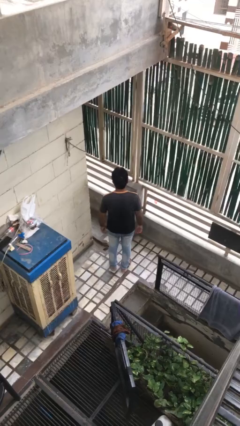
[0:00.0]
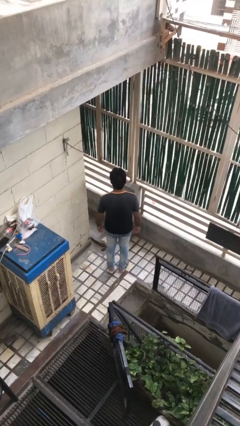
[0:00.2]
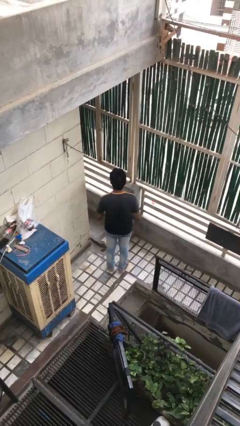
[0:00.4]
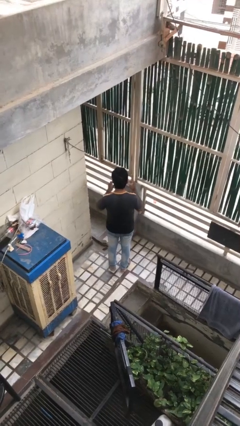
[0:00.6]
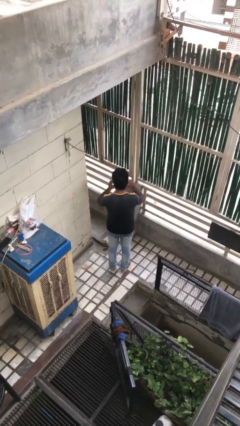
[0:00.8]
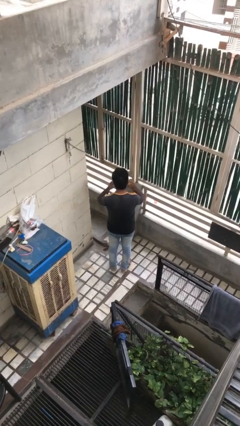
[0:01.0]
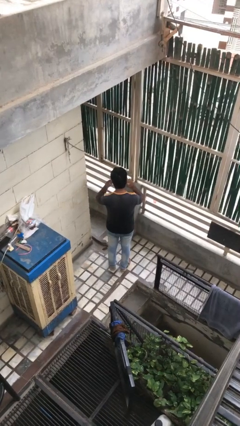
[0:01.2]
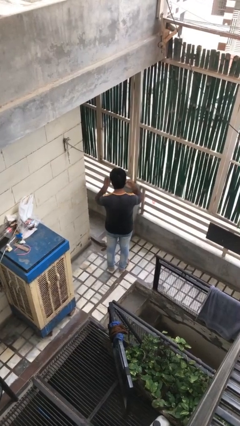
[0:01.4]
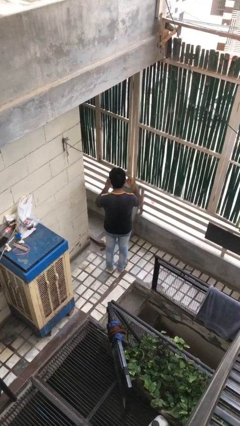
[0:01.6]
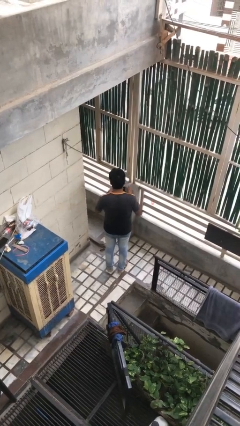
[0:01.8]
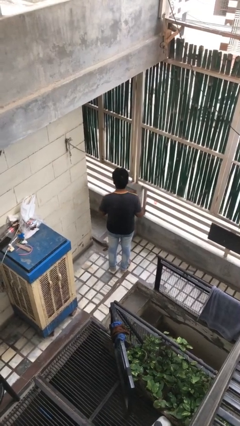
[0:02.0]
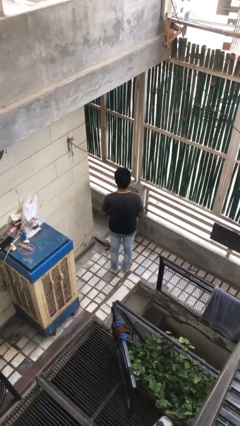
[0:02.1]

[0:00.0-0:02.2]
person takes off facemask

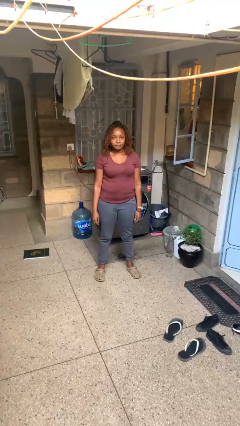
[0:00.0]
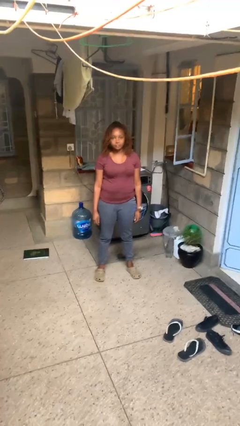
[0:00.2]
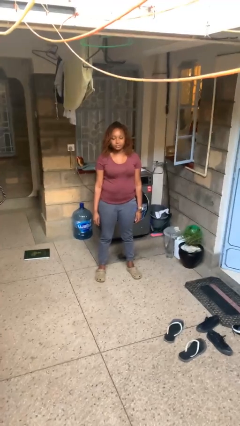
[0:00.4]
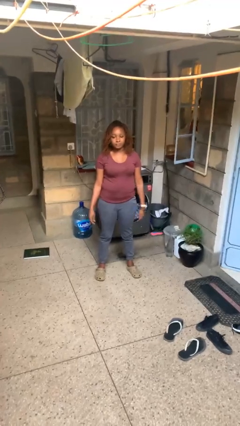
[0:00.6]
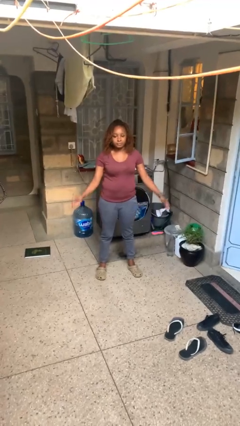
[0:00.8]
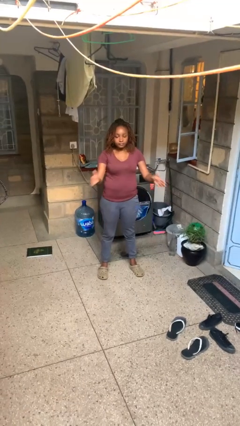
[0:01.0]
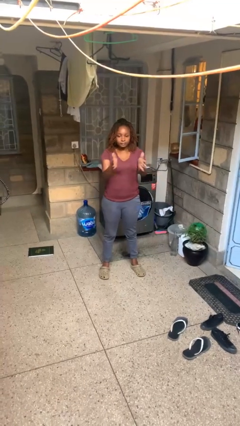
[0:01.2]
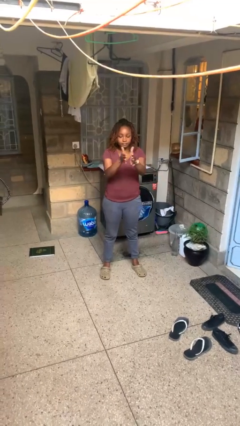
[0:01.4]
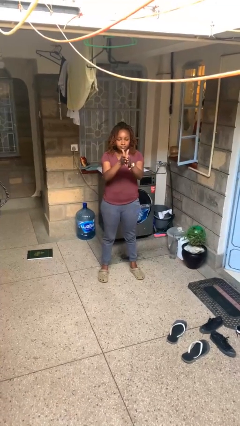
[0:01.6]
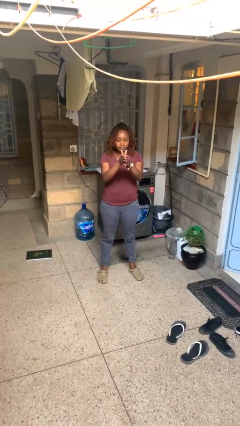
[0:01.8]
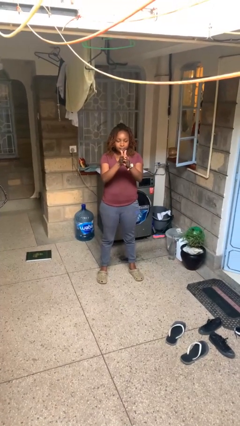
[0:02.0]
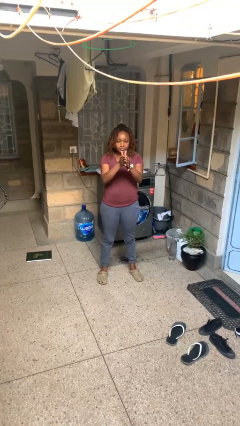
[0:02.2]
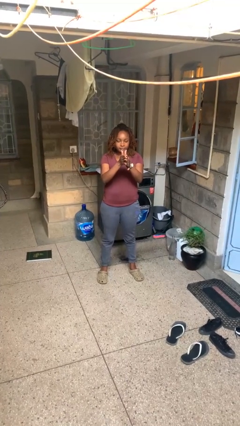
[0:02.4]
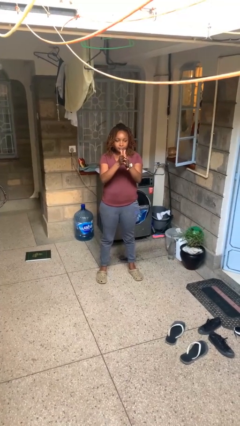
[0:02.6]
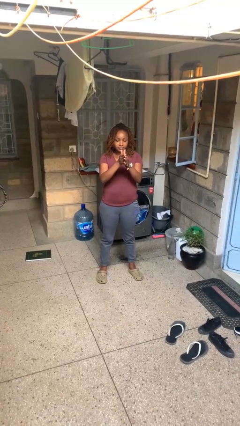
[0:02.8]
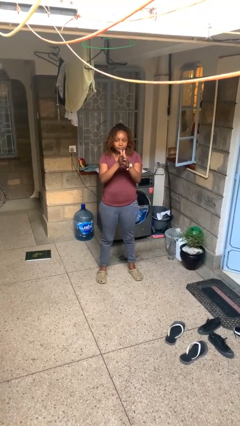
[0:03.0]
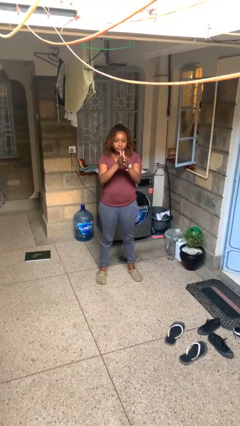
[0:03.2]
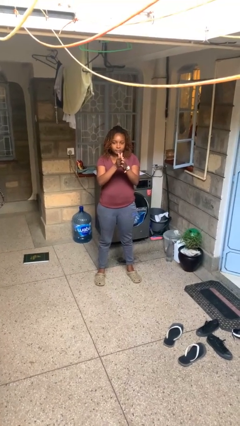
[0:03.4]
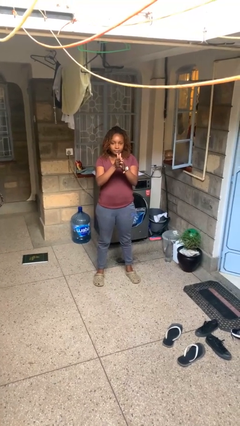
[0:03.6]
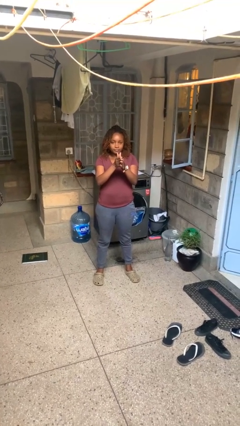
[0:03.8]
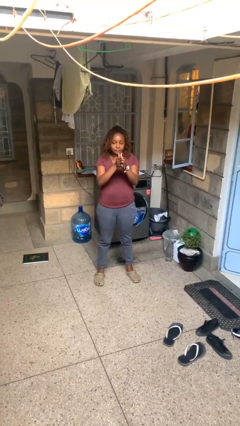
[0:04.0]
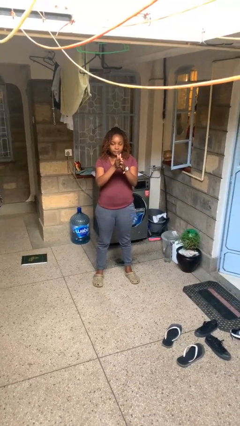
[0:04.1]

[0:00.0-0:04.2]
person gestures zoom in

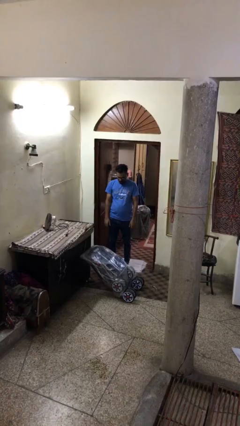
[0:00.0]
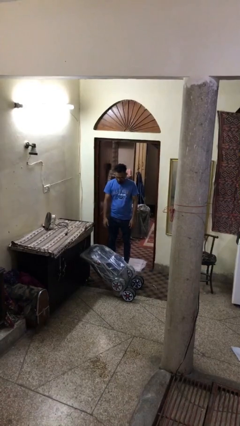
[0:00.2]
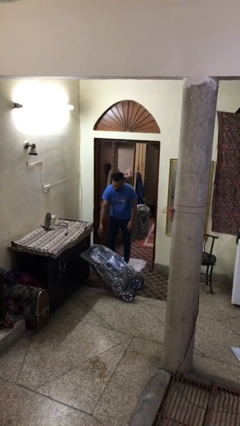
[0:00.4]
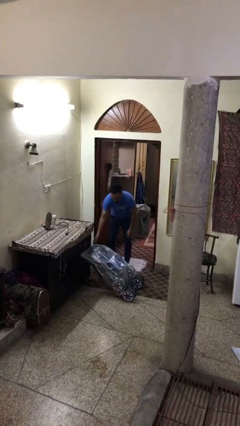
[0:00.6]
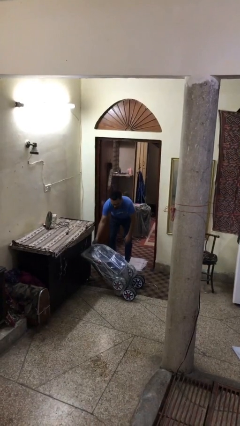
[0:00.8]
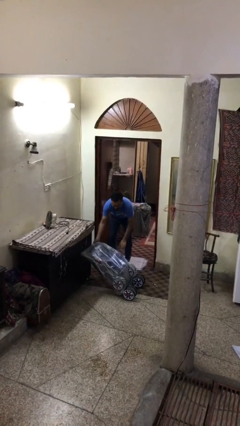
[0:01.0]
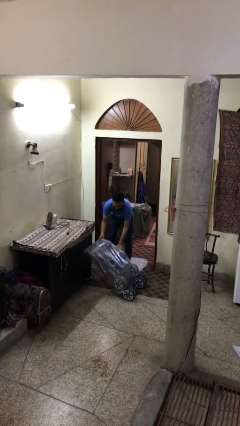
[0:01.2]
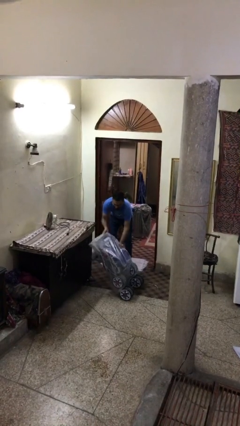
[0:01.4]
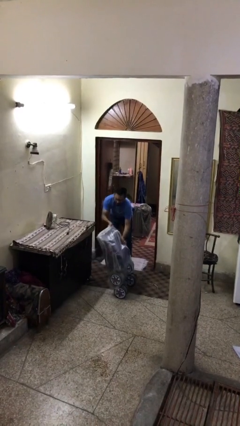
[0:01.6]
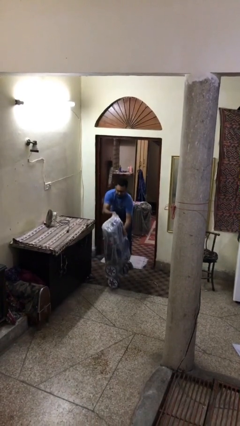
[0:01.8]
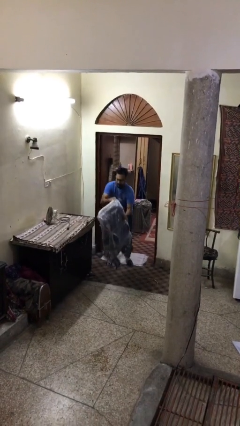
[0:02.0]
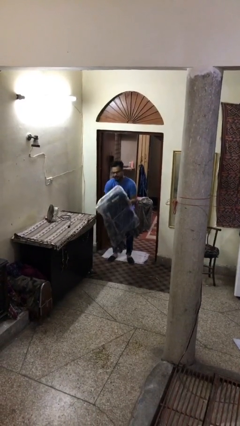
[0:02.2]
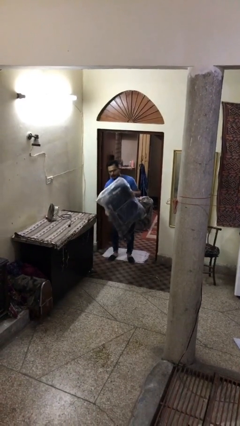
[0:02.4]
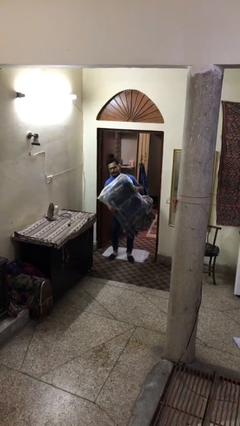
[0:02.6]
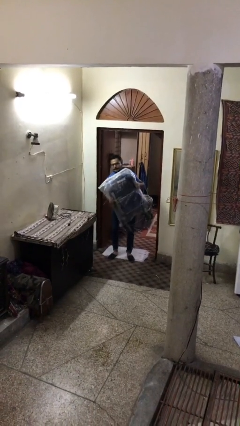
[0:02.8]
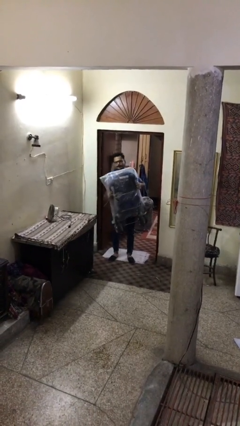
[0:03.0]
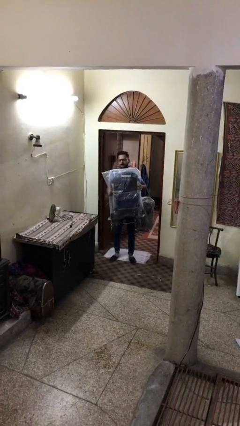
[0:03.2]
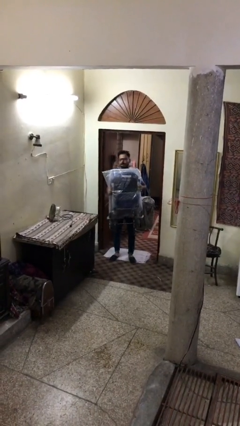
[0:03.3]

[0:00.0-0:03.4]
person picks up object from floor

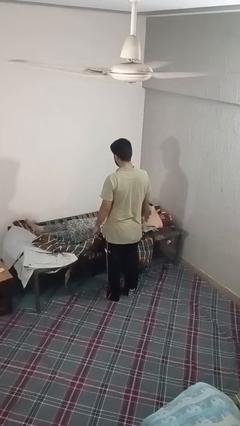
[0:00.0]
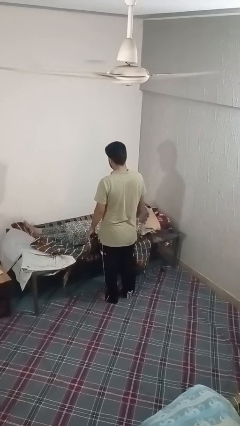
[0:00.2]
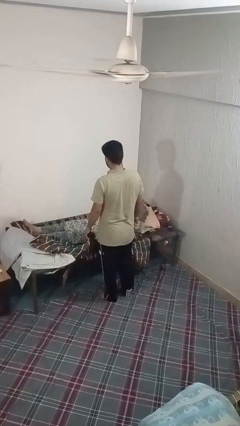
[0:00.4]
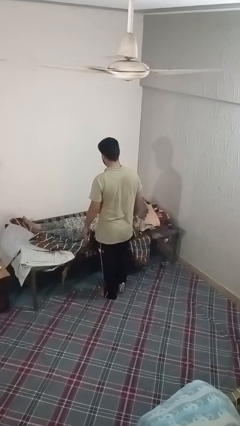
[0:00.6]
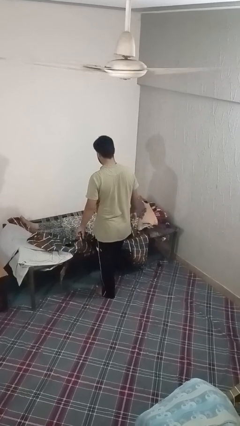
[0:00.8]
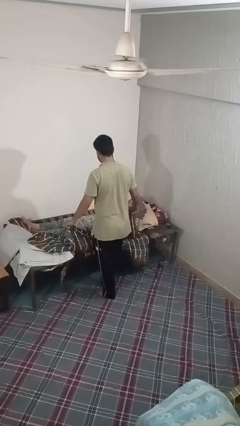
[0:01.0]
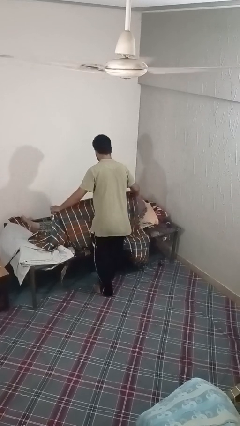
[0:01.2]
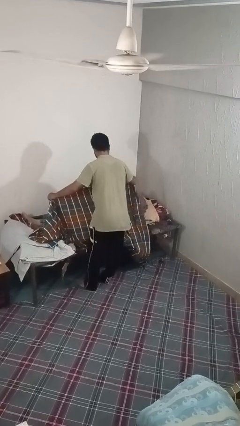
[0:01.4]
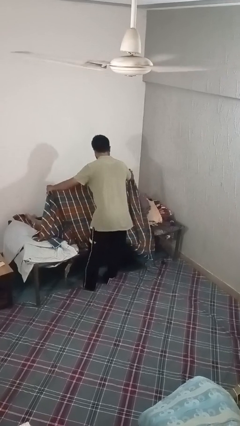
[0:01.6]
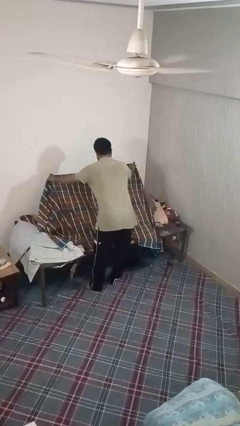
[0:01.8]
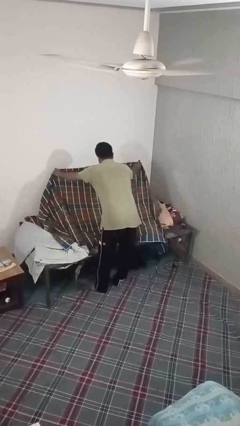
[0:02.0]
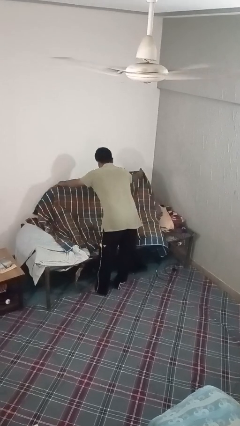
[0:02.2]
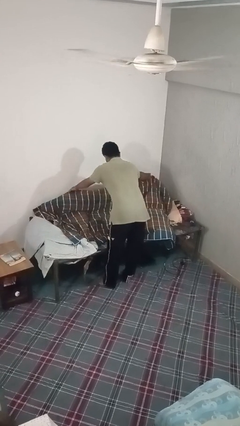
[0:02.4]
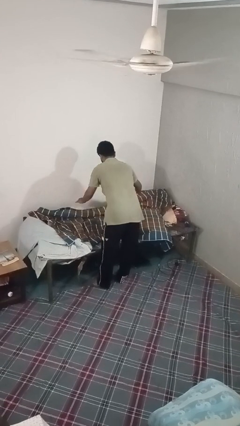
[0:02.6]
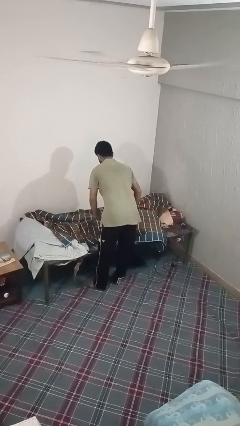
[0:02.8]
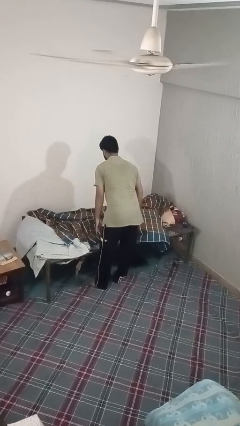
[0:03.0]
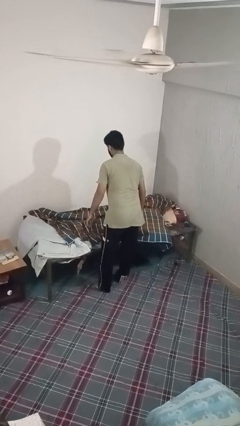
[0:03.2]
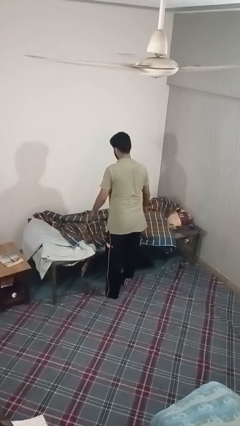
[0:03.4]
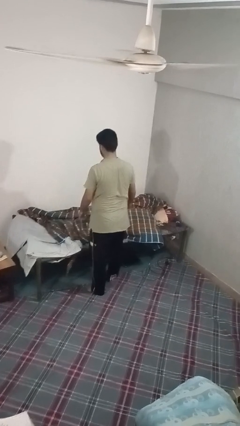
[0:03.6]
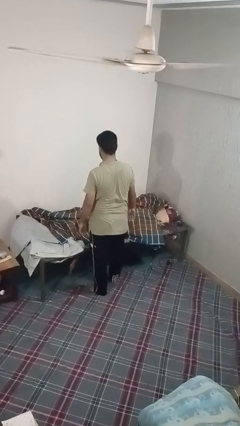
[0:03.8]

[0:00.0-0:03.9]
person covers friend with blanket

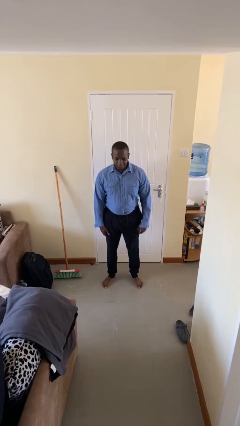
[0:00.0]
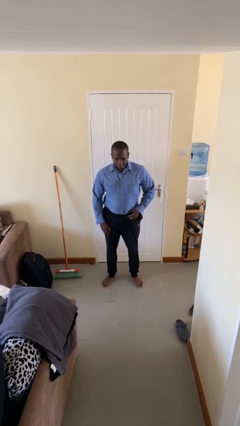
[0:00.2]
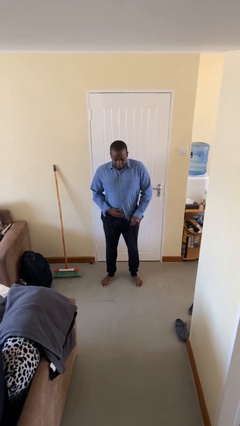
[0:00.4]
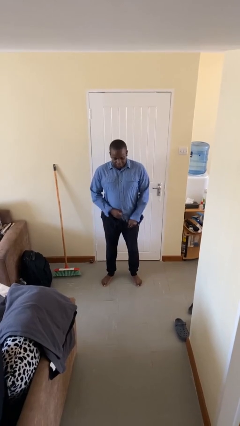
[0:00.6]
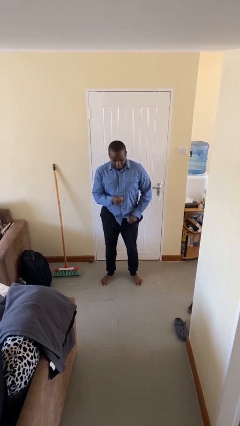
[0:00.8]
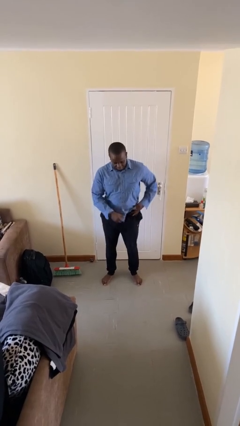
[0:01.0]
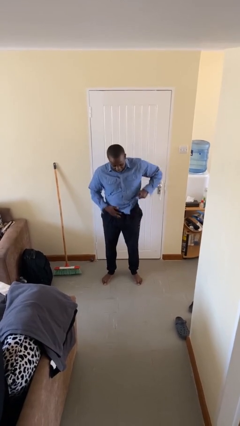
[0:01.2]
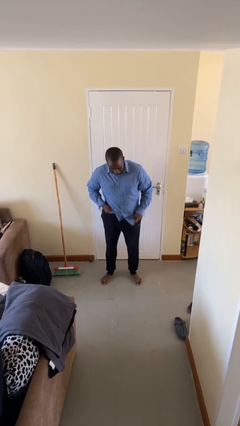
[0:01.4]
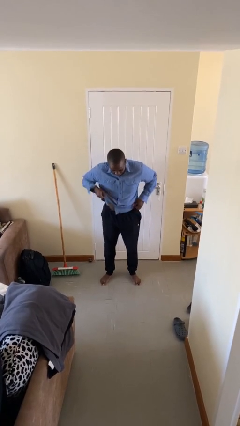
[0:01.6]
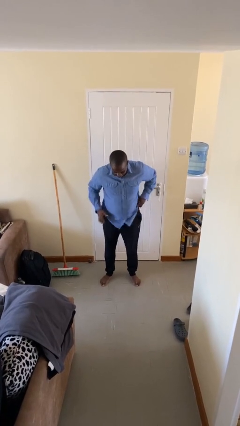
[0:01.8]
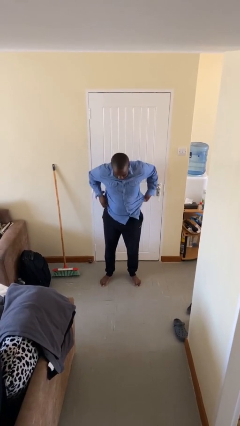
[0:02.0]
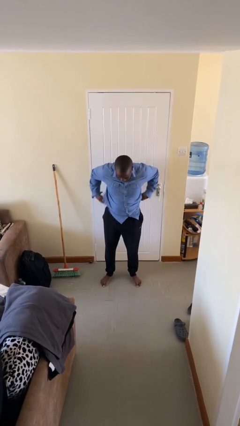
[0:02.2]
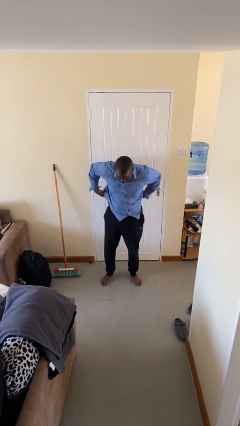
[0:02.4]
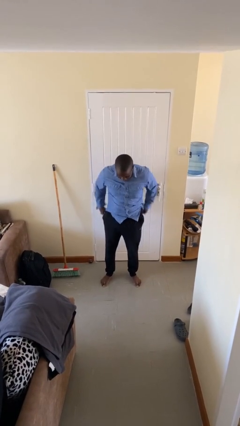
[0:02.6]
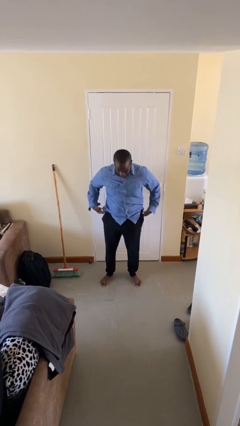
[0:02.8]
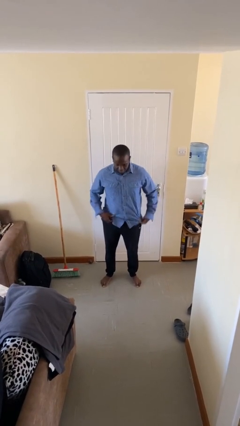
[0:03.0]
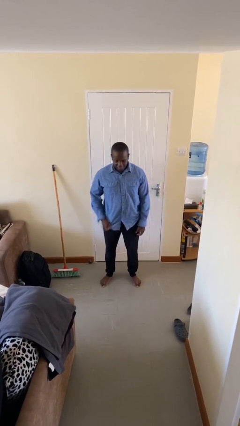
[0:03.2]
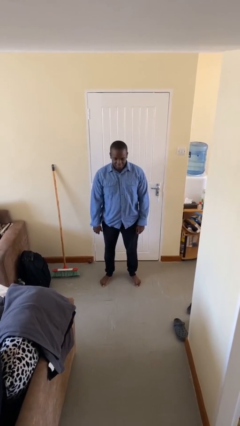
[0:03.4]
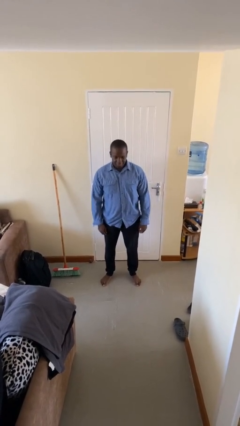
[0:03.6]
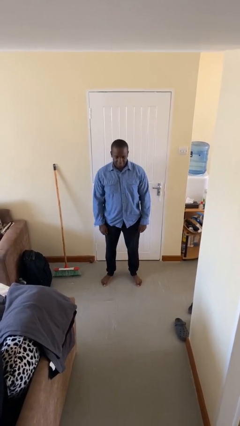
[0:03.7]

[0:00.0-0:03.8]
person untucks shirt
